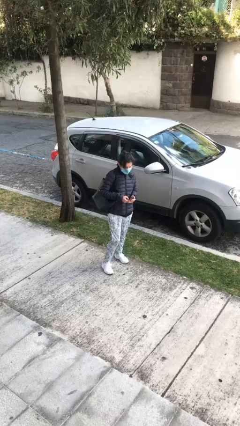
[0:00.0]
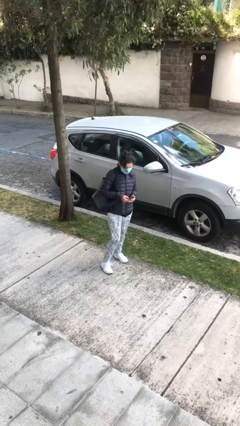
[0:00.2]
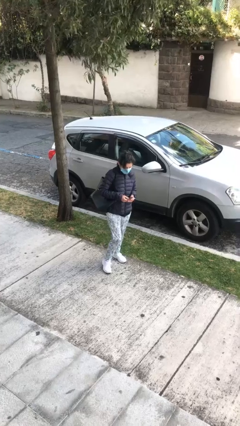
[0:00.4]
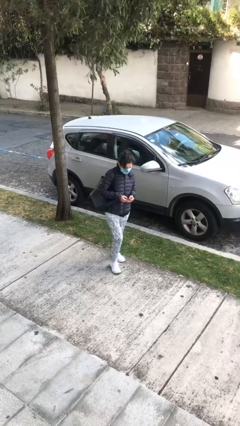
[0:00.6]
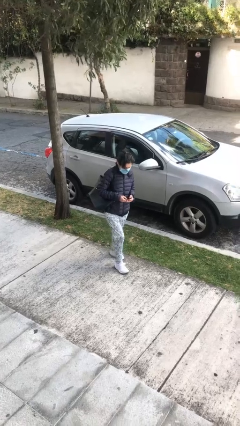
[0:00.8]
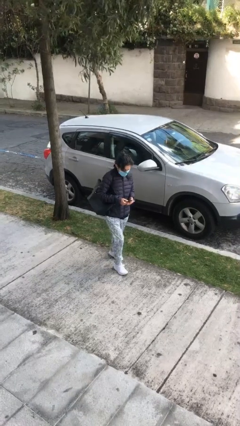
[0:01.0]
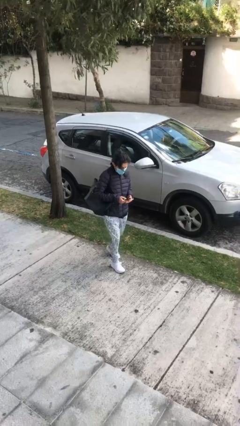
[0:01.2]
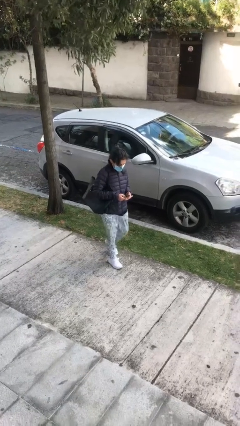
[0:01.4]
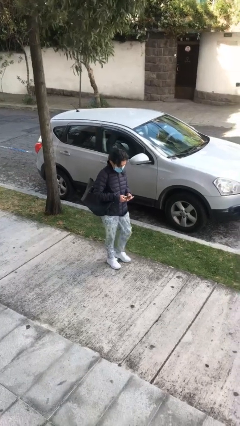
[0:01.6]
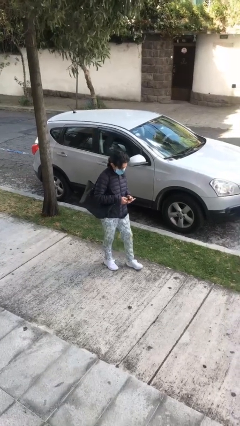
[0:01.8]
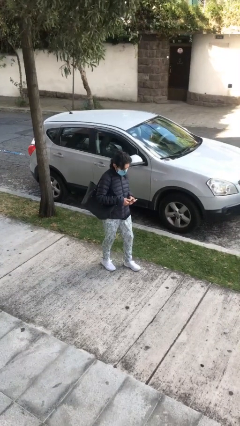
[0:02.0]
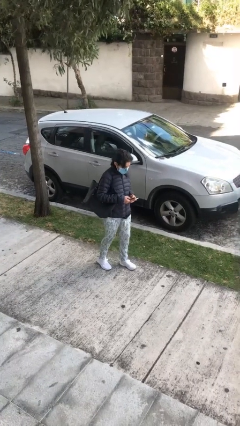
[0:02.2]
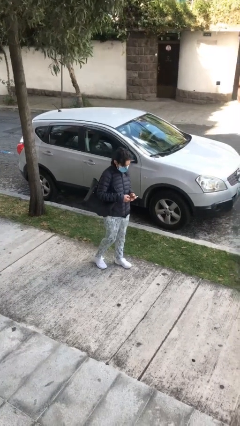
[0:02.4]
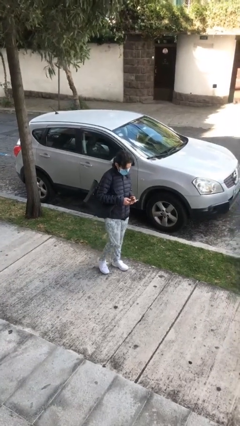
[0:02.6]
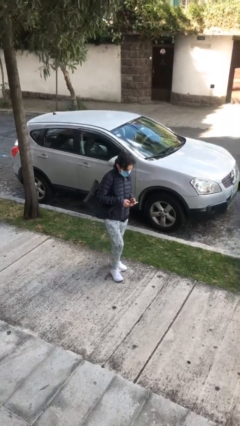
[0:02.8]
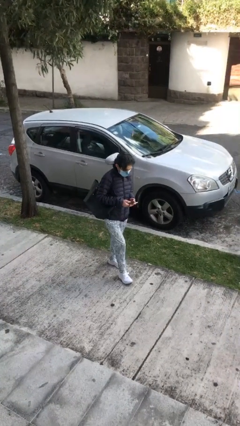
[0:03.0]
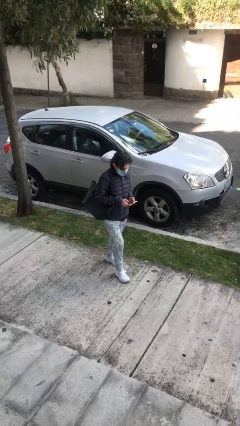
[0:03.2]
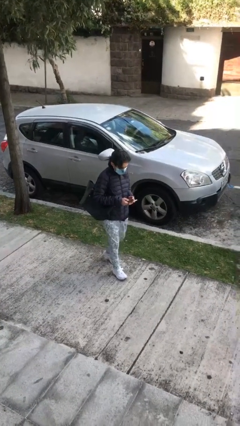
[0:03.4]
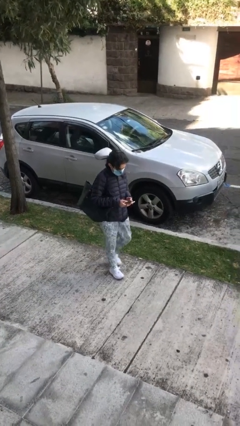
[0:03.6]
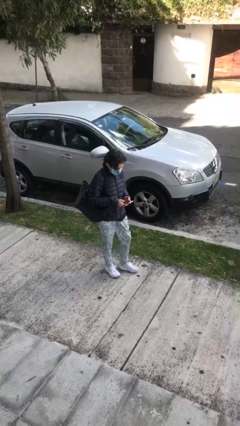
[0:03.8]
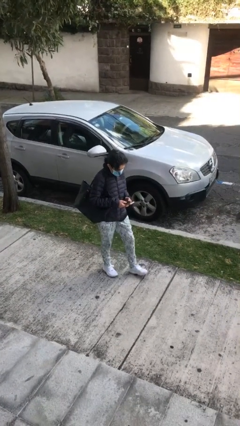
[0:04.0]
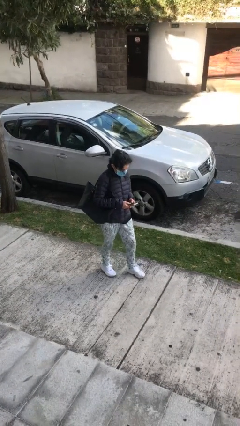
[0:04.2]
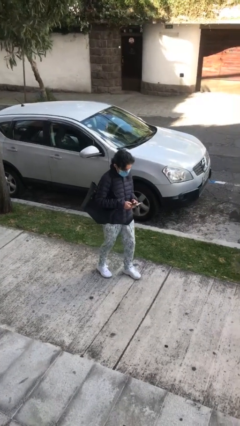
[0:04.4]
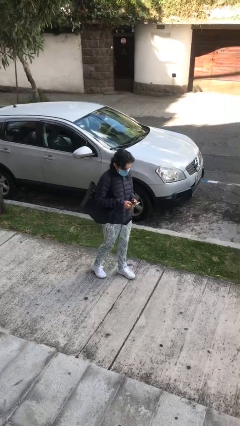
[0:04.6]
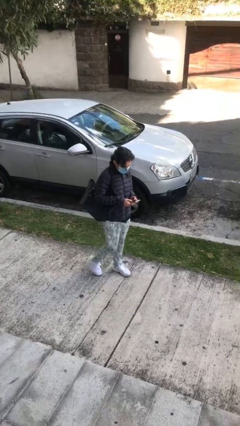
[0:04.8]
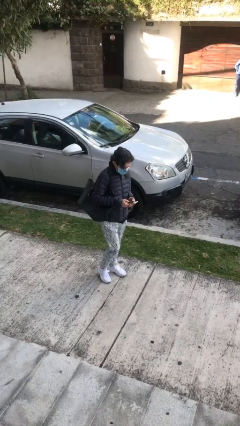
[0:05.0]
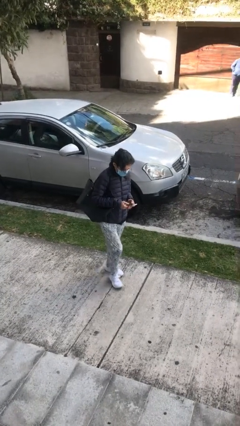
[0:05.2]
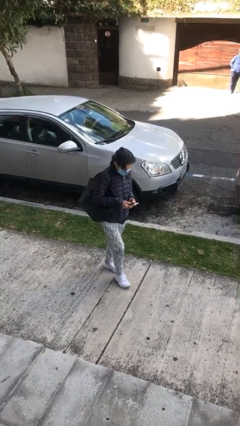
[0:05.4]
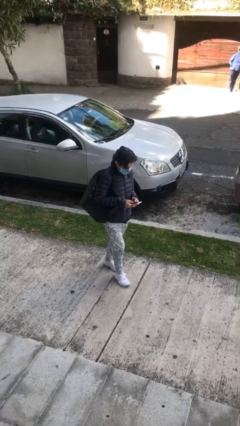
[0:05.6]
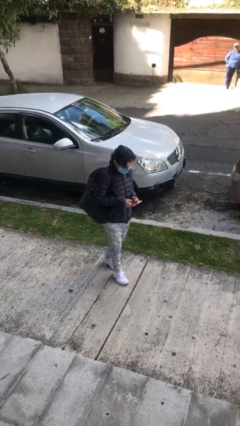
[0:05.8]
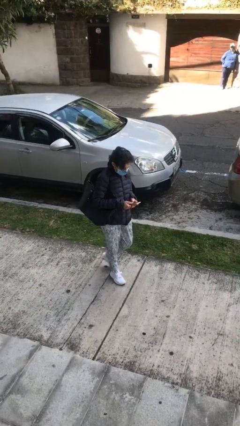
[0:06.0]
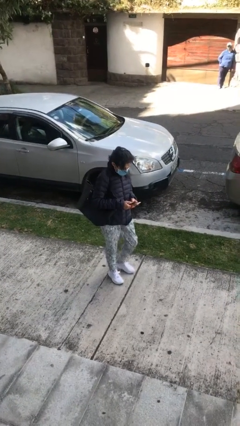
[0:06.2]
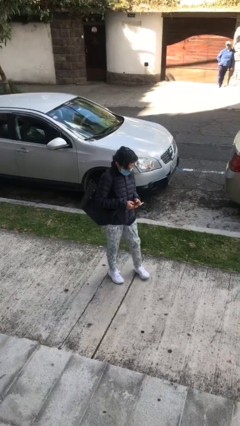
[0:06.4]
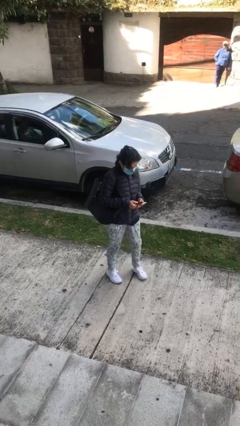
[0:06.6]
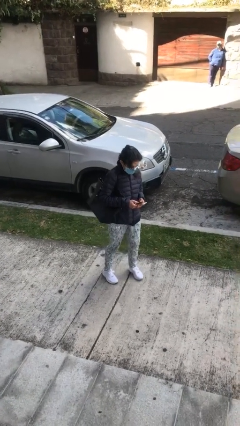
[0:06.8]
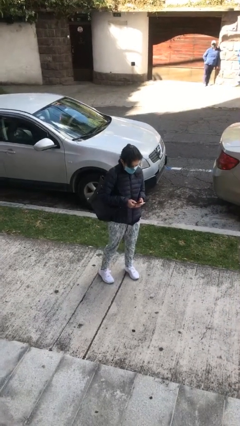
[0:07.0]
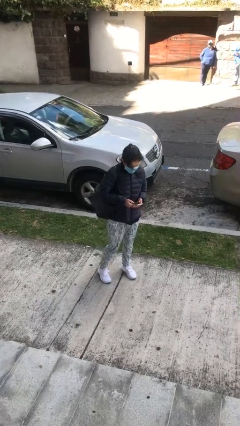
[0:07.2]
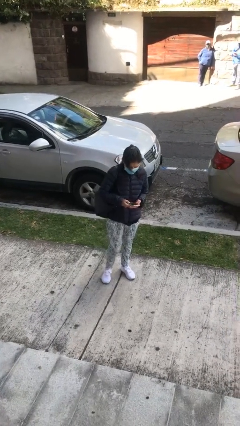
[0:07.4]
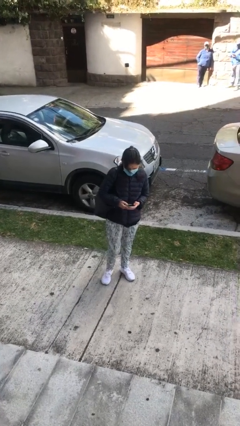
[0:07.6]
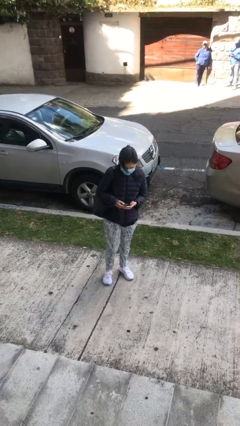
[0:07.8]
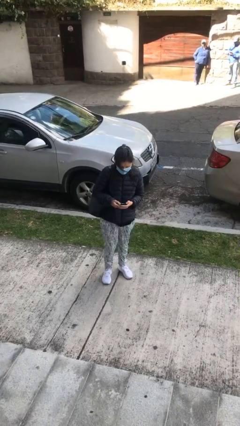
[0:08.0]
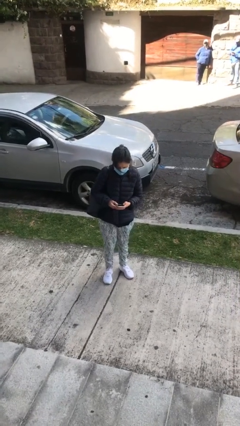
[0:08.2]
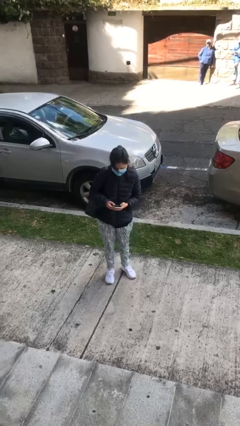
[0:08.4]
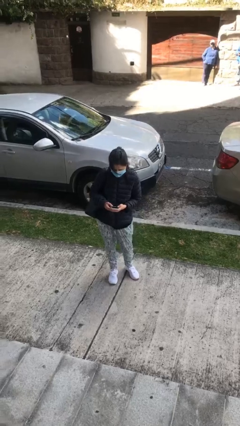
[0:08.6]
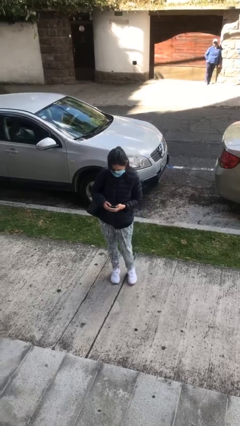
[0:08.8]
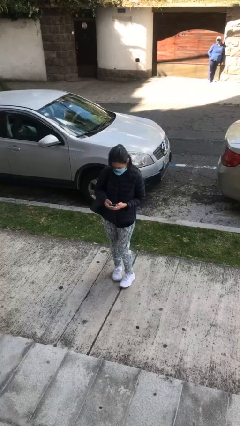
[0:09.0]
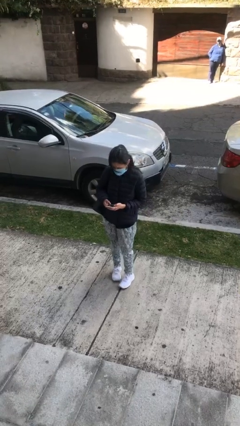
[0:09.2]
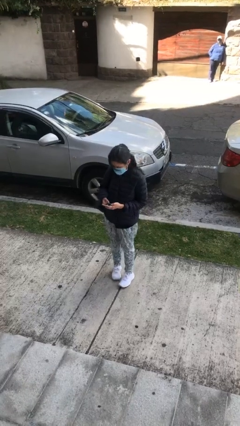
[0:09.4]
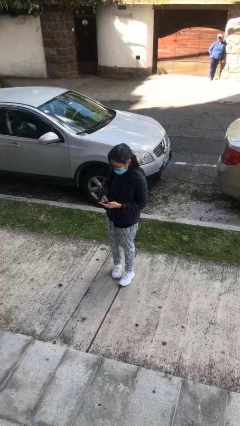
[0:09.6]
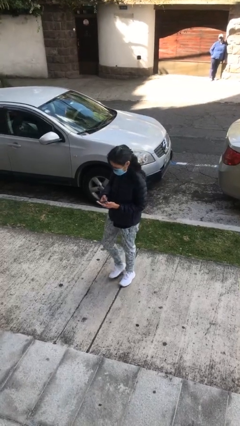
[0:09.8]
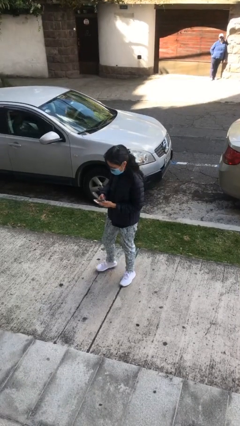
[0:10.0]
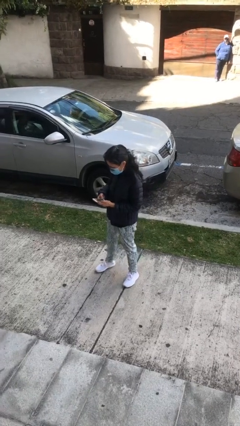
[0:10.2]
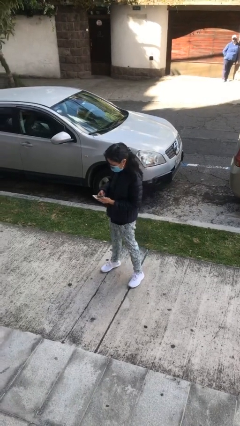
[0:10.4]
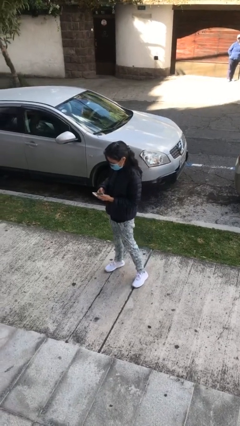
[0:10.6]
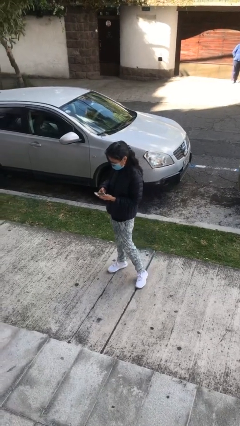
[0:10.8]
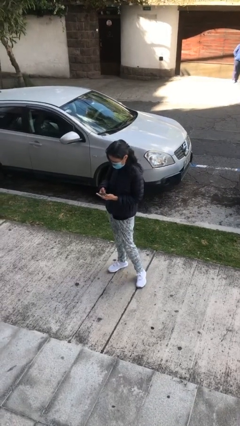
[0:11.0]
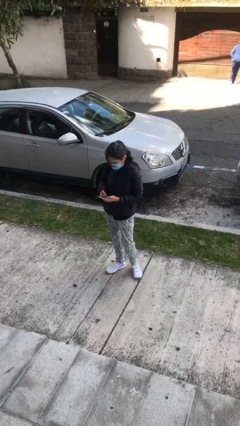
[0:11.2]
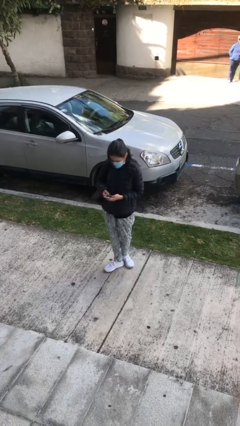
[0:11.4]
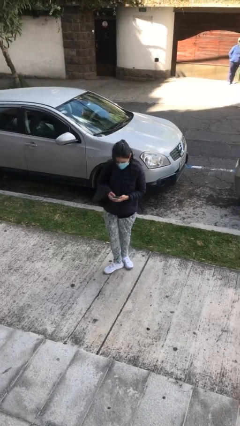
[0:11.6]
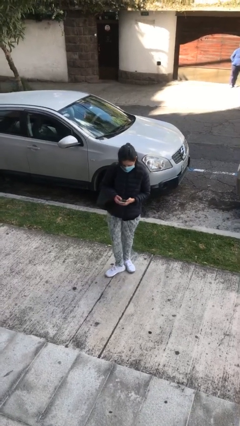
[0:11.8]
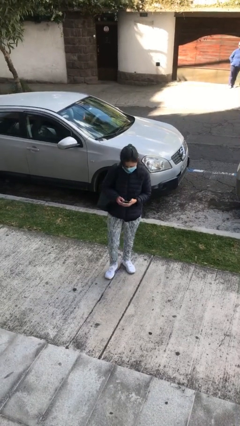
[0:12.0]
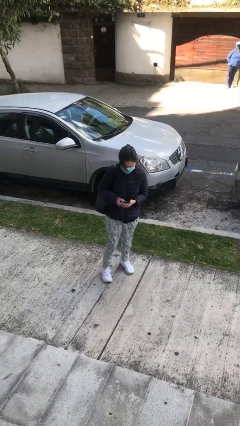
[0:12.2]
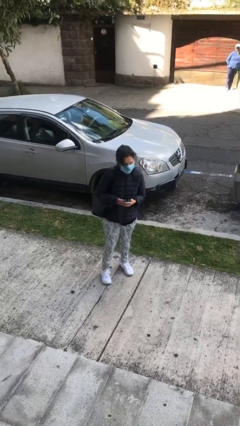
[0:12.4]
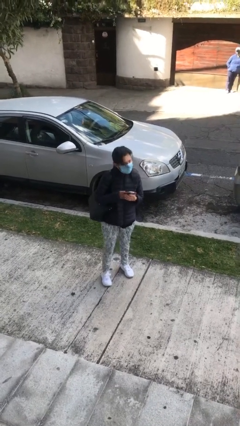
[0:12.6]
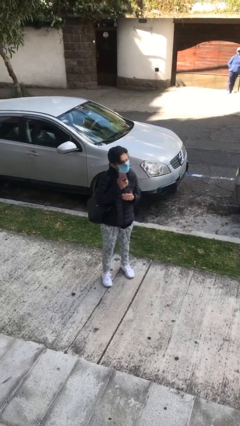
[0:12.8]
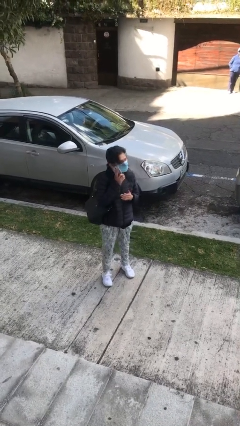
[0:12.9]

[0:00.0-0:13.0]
person texts on phone

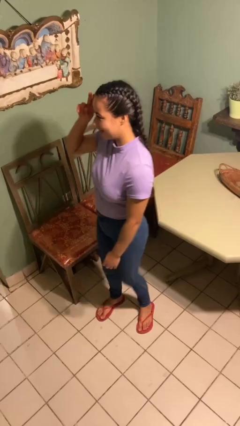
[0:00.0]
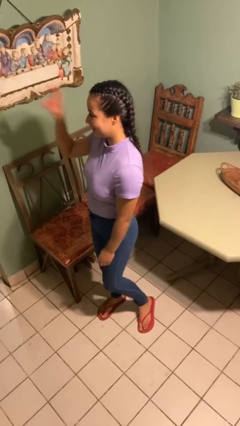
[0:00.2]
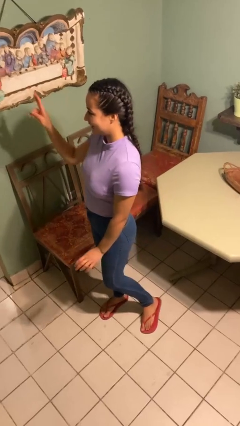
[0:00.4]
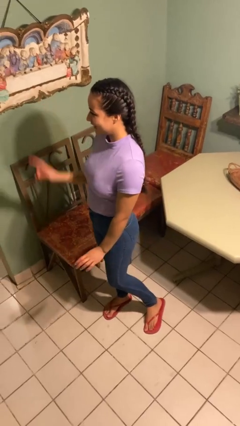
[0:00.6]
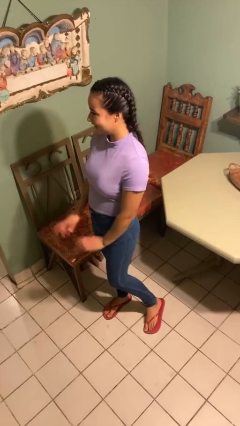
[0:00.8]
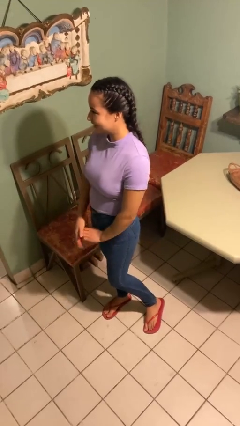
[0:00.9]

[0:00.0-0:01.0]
person salutes

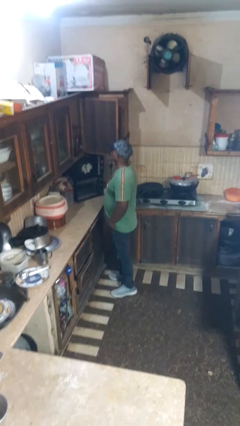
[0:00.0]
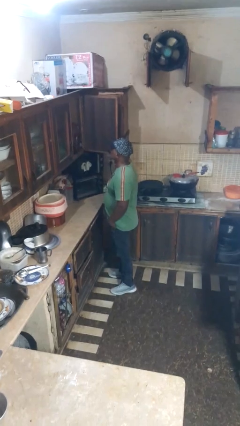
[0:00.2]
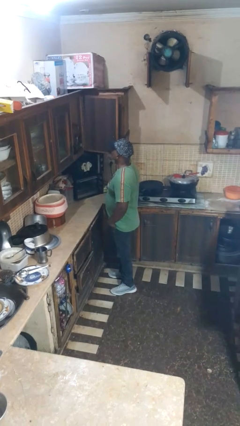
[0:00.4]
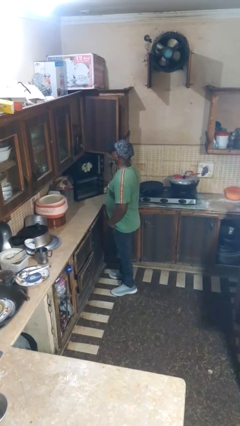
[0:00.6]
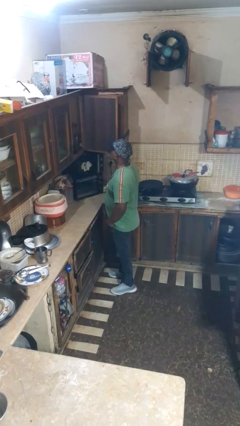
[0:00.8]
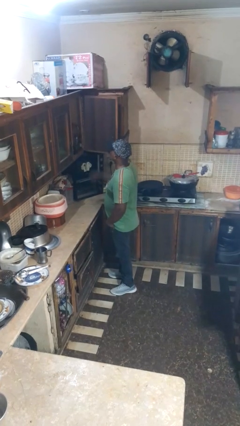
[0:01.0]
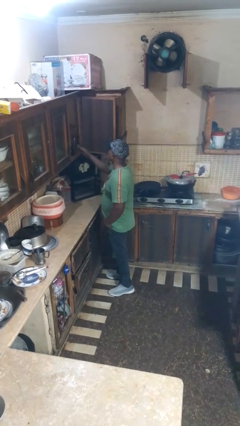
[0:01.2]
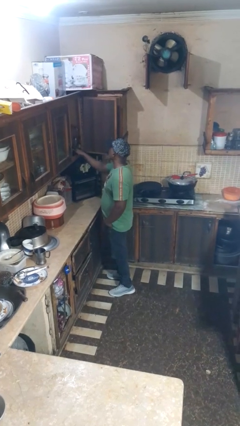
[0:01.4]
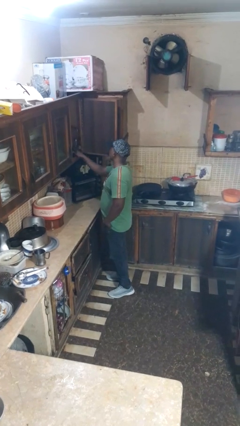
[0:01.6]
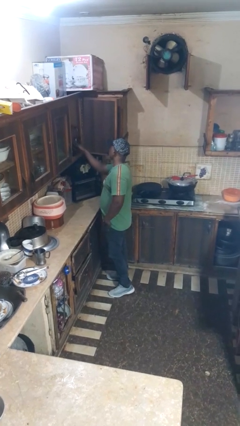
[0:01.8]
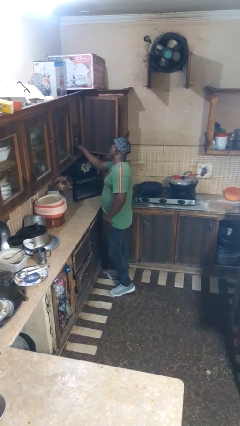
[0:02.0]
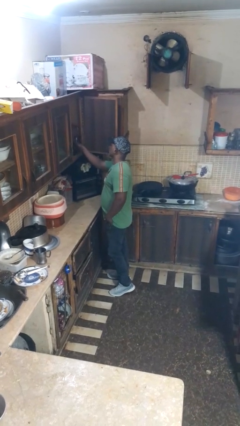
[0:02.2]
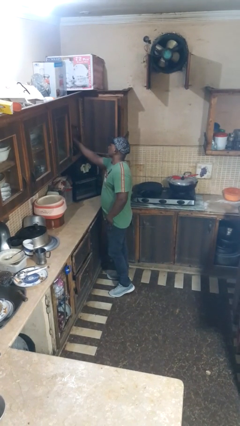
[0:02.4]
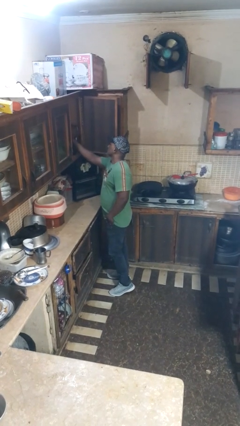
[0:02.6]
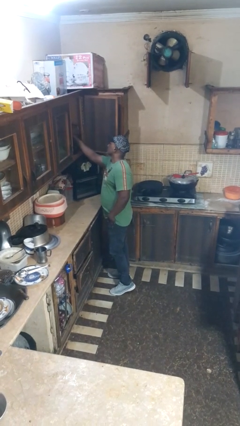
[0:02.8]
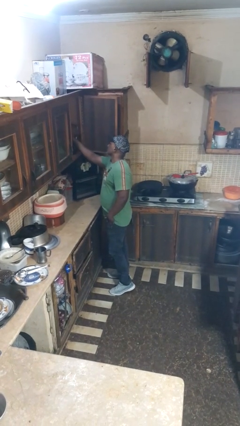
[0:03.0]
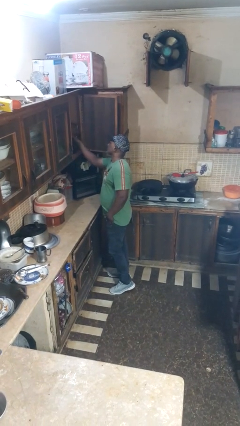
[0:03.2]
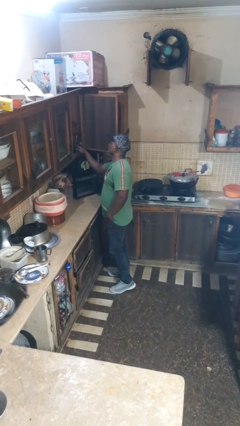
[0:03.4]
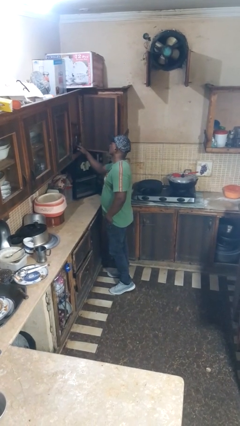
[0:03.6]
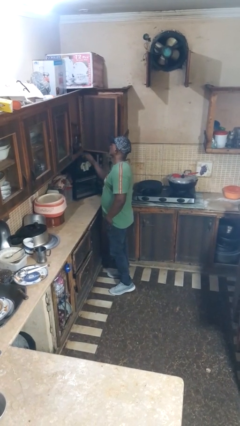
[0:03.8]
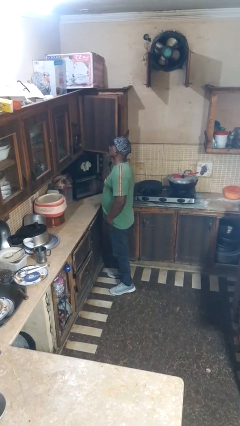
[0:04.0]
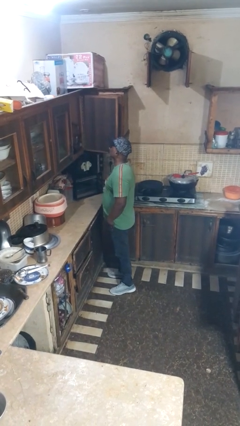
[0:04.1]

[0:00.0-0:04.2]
person searches in cabinet
